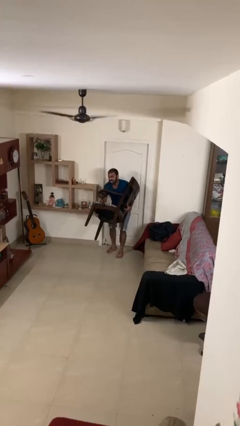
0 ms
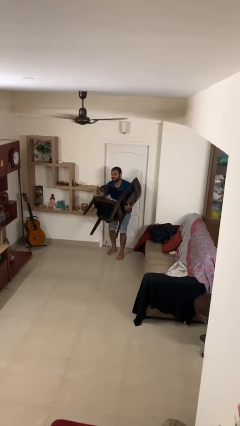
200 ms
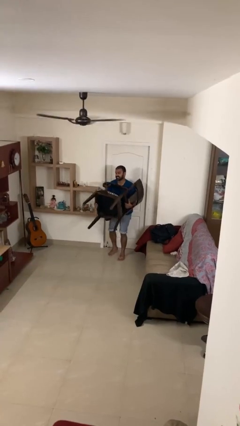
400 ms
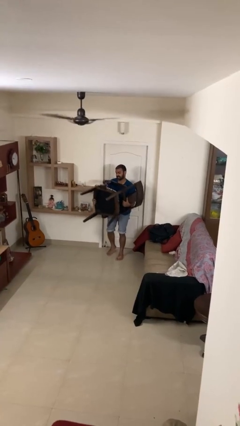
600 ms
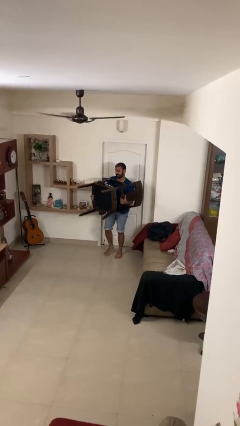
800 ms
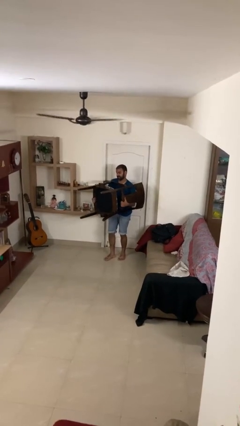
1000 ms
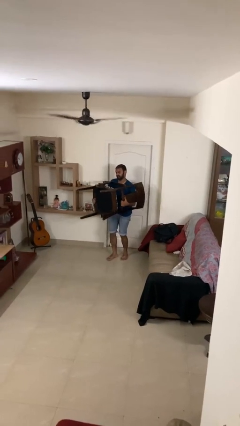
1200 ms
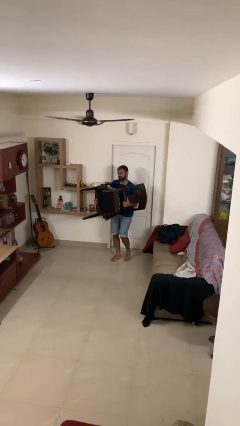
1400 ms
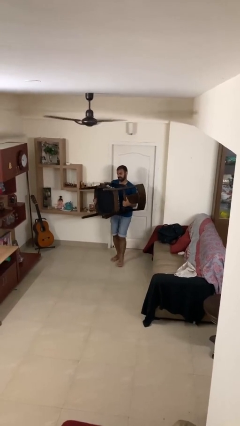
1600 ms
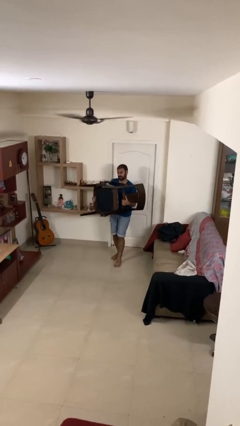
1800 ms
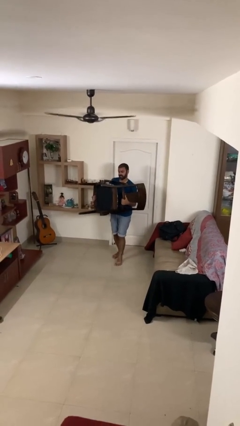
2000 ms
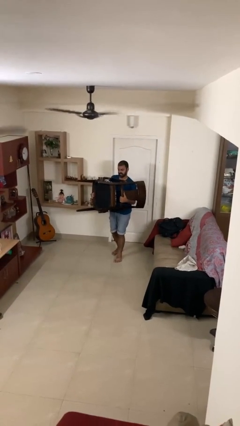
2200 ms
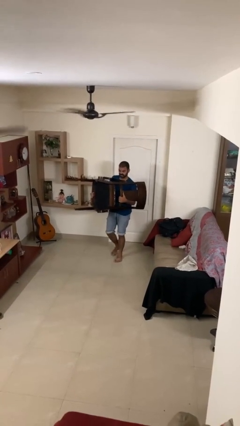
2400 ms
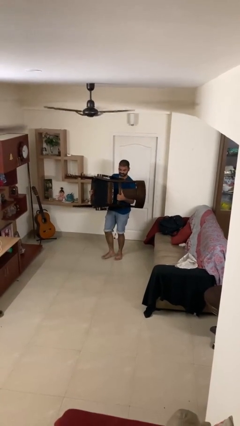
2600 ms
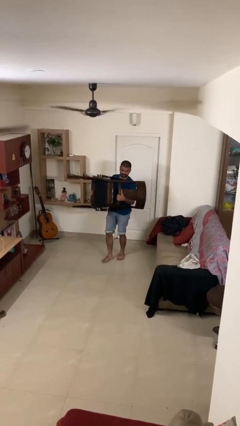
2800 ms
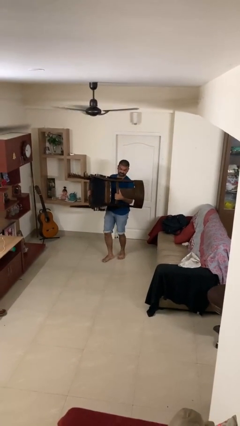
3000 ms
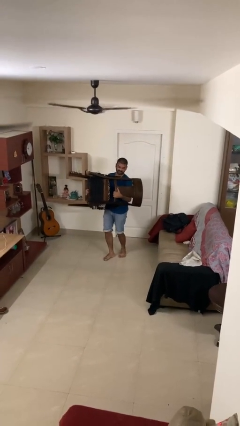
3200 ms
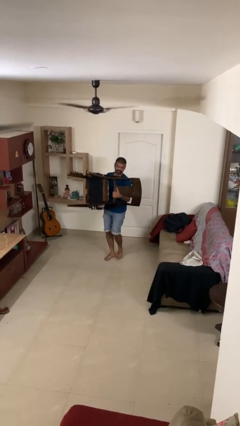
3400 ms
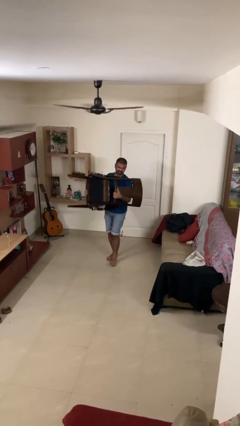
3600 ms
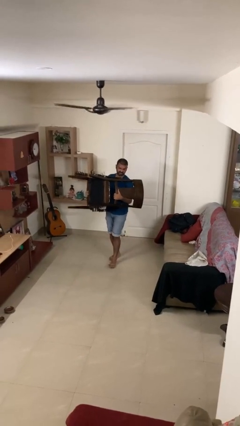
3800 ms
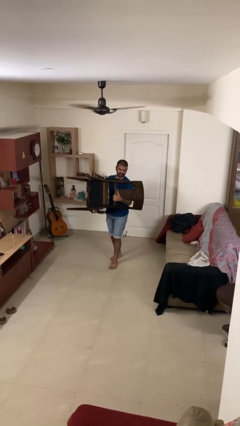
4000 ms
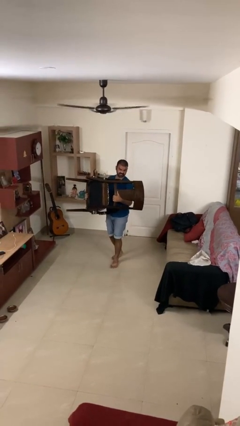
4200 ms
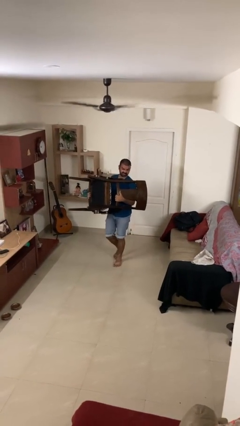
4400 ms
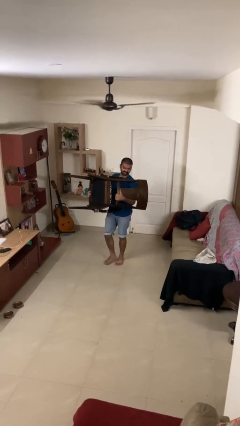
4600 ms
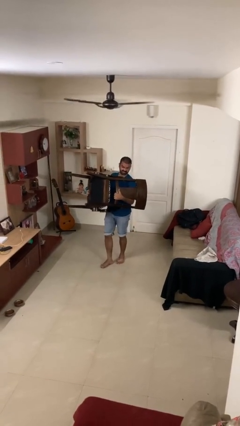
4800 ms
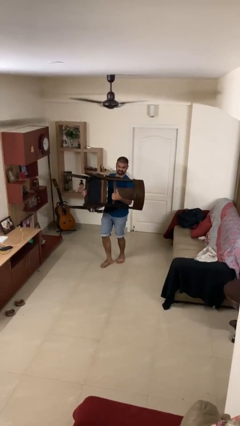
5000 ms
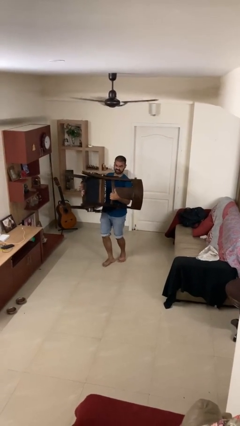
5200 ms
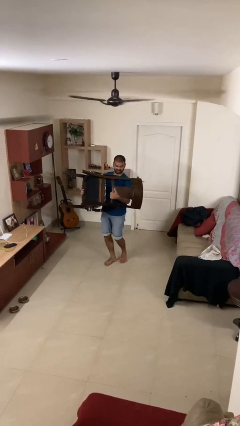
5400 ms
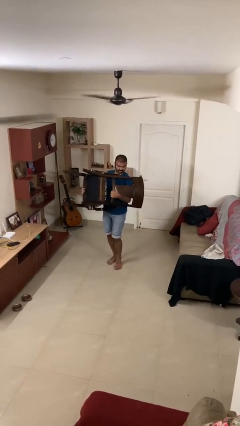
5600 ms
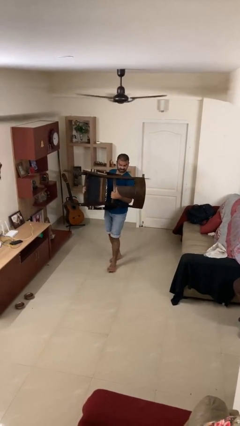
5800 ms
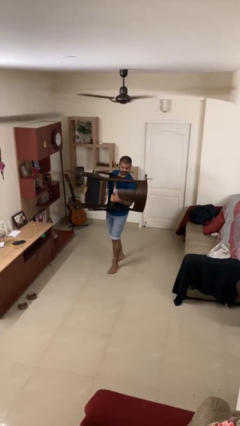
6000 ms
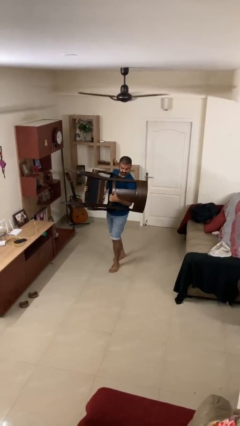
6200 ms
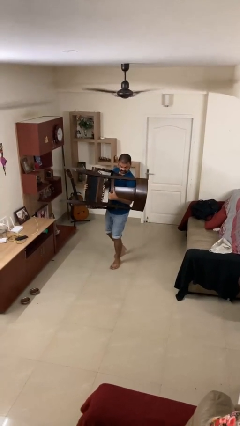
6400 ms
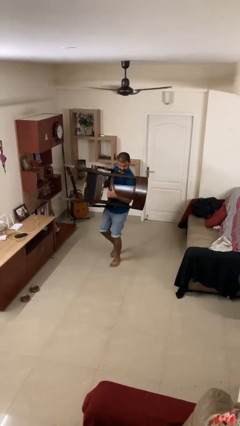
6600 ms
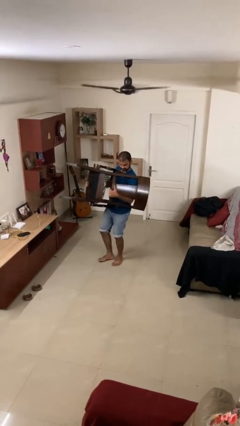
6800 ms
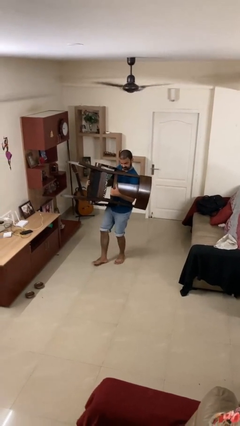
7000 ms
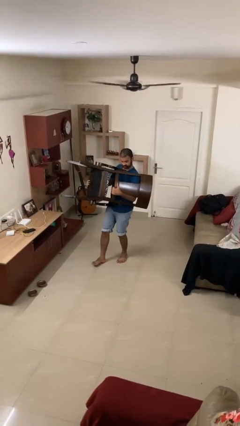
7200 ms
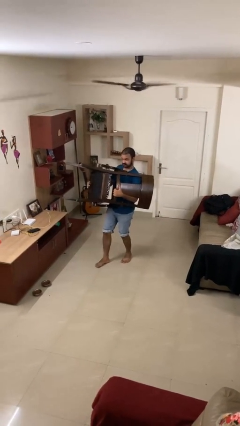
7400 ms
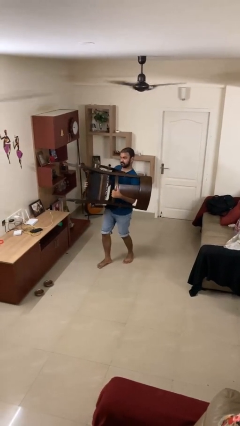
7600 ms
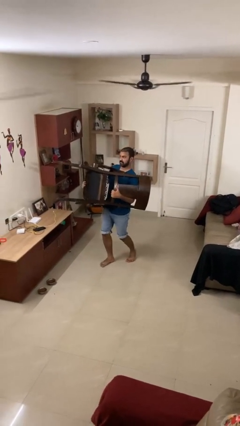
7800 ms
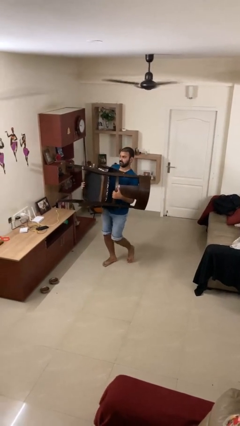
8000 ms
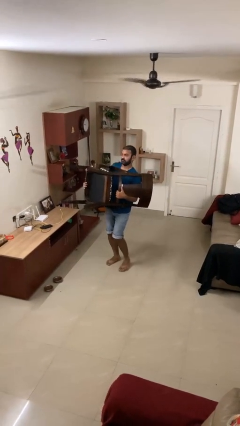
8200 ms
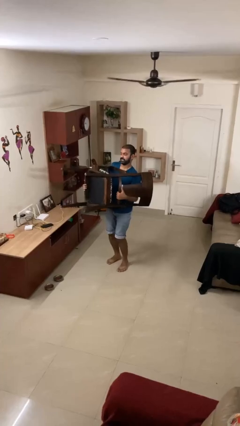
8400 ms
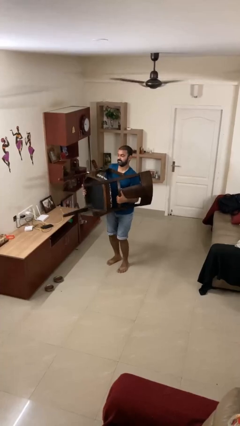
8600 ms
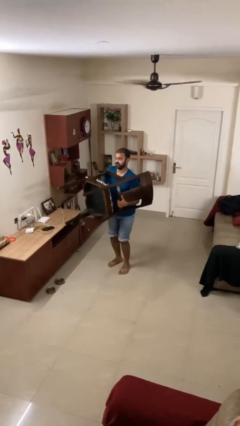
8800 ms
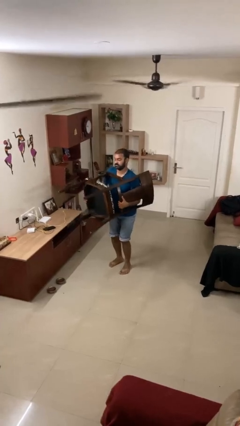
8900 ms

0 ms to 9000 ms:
person carries heavy object

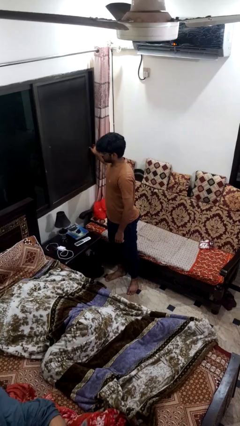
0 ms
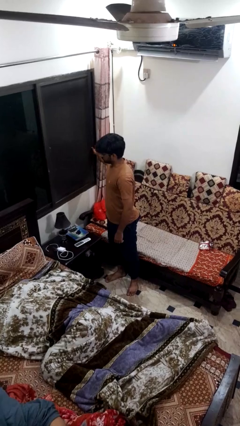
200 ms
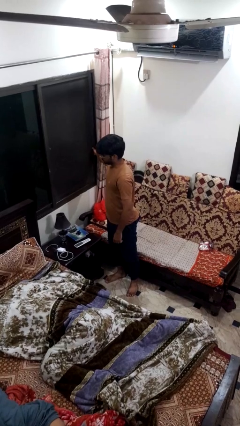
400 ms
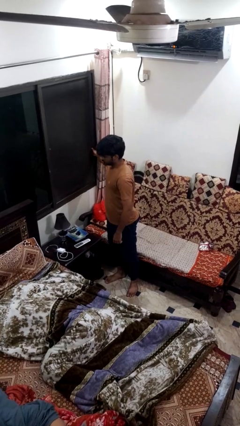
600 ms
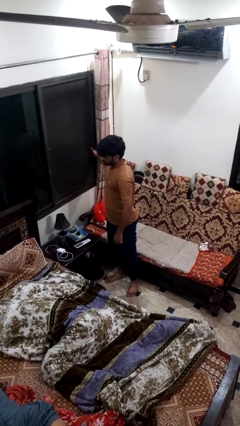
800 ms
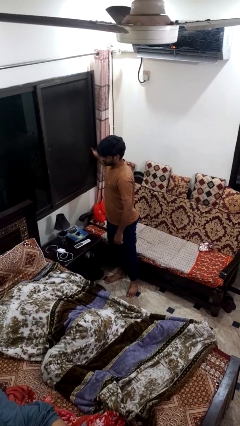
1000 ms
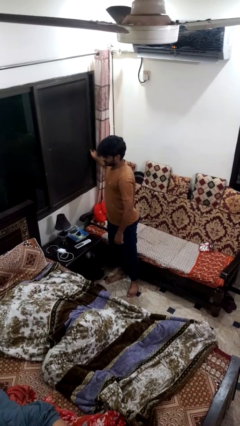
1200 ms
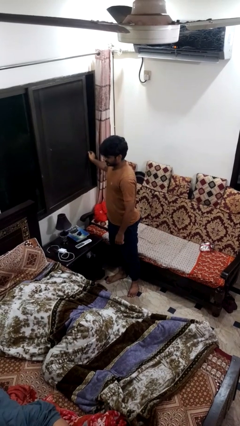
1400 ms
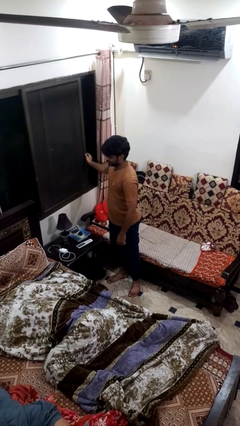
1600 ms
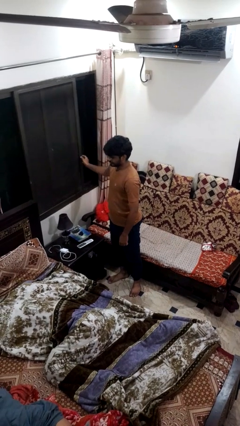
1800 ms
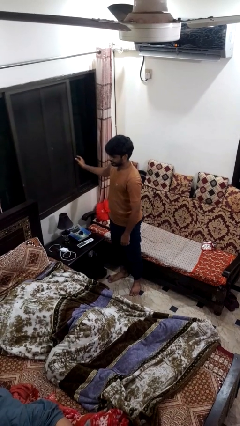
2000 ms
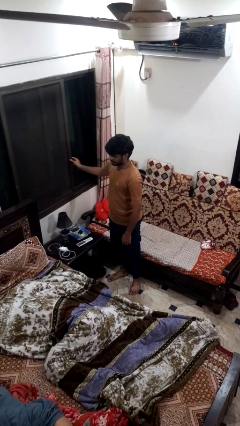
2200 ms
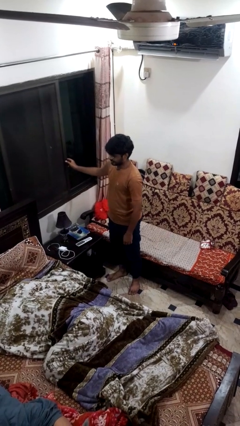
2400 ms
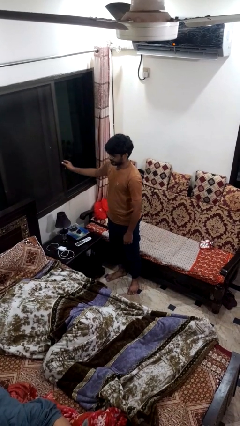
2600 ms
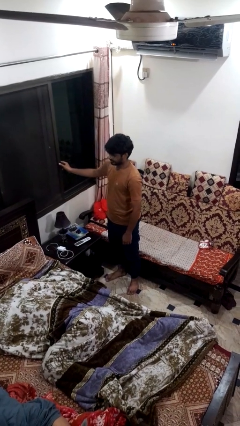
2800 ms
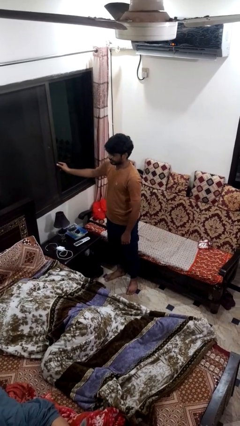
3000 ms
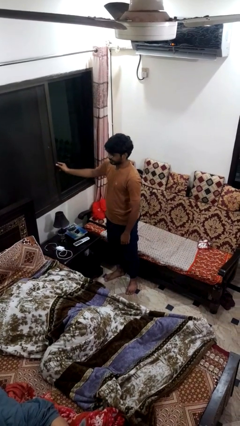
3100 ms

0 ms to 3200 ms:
person closes home window

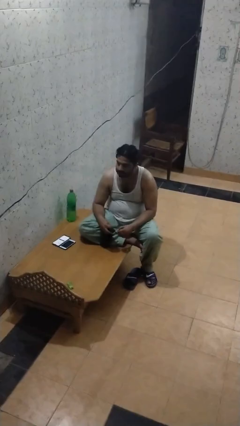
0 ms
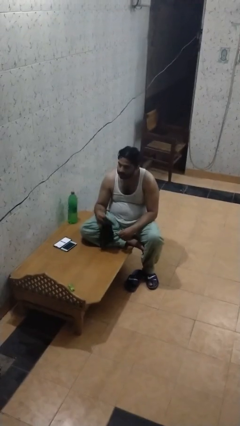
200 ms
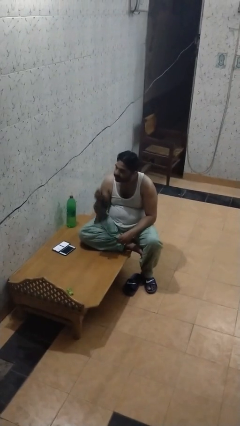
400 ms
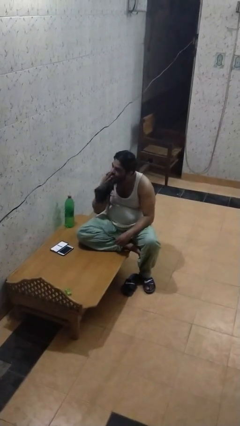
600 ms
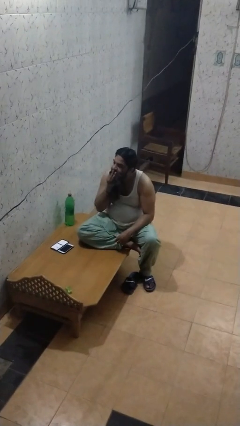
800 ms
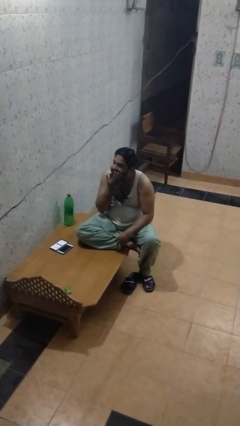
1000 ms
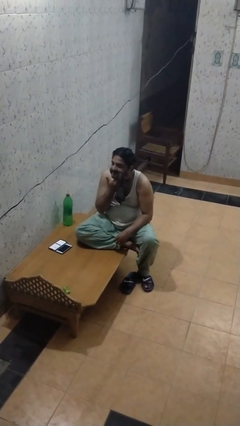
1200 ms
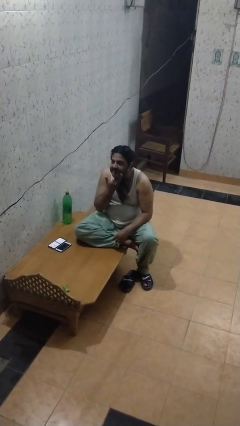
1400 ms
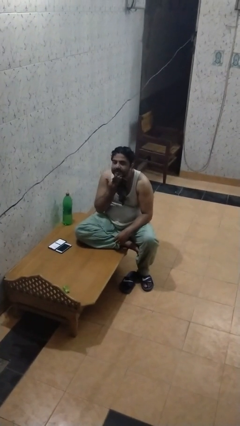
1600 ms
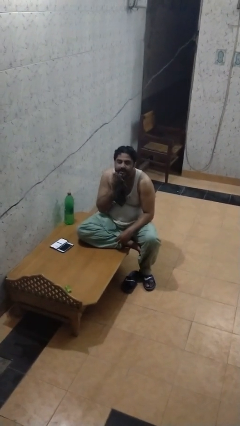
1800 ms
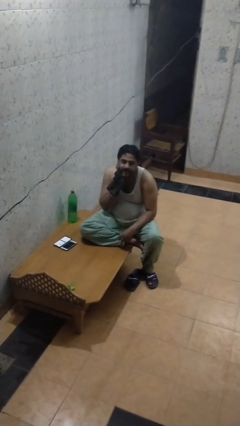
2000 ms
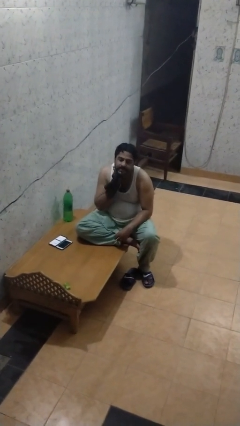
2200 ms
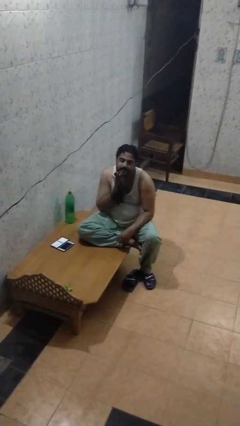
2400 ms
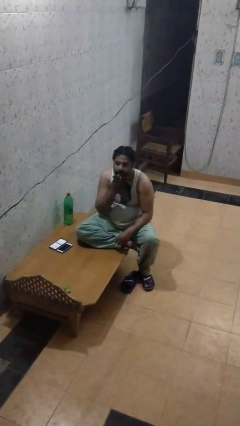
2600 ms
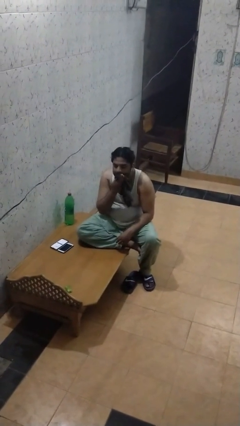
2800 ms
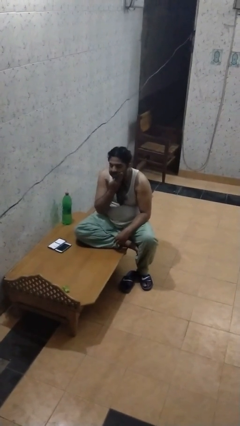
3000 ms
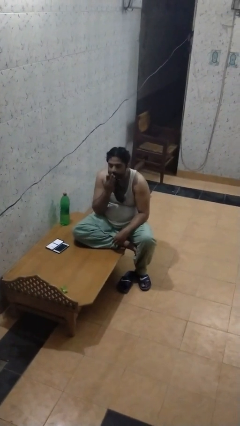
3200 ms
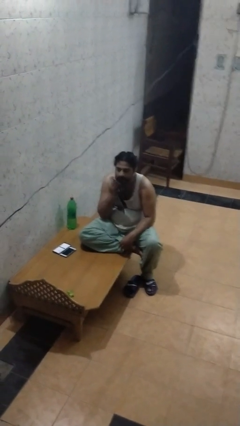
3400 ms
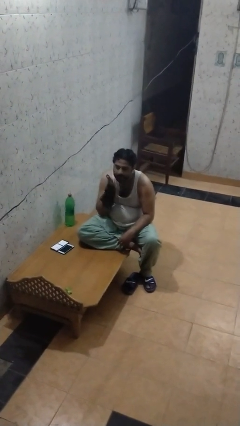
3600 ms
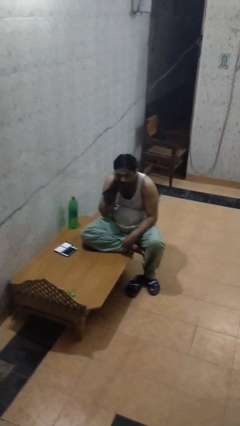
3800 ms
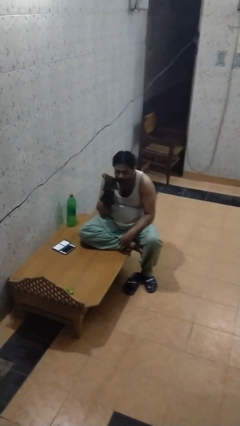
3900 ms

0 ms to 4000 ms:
person wipes mouth with napkin

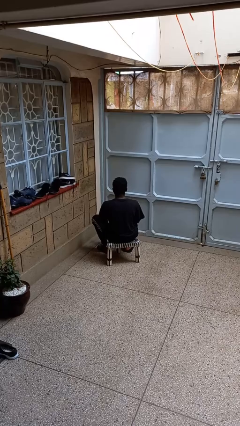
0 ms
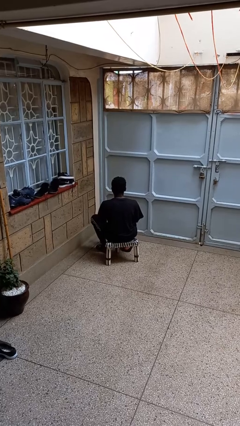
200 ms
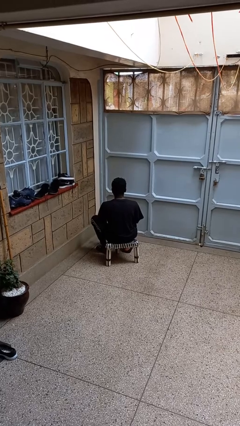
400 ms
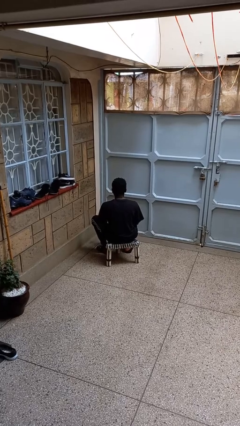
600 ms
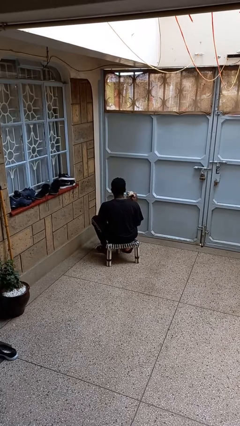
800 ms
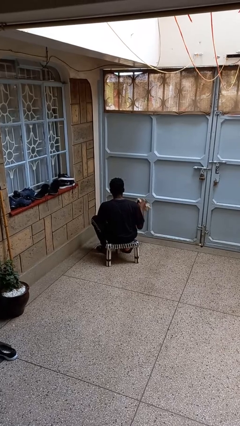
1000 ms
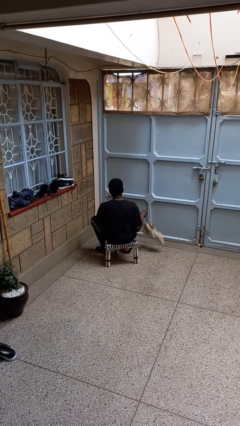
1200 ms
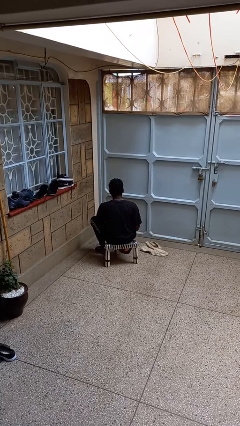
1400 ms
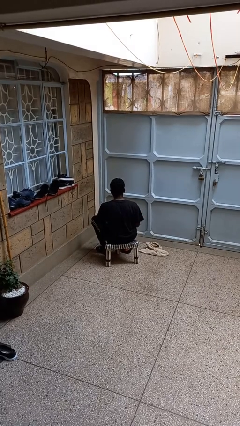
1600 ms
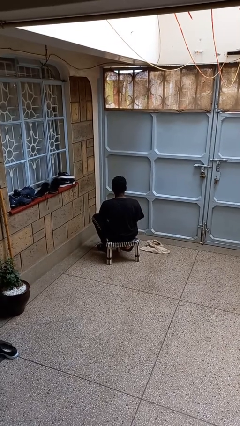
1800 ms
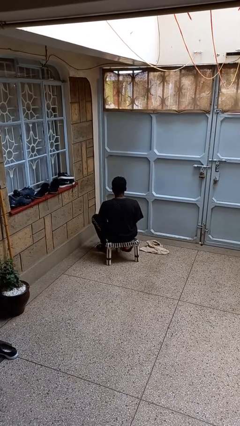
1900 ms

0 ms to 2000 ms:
person throws object to ground
